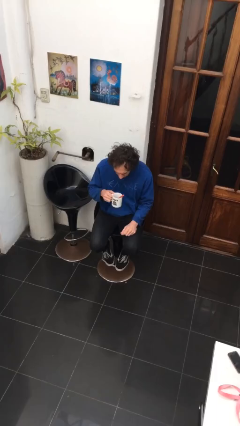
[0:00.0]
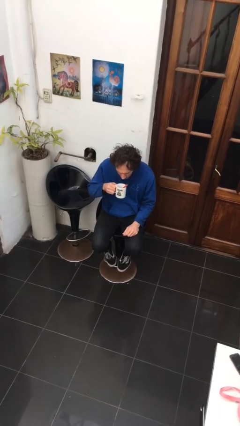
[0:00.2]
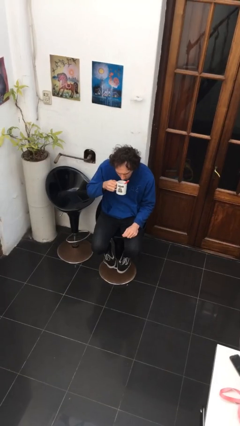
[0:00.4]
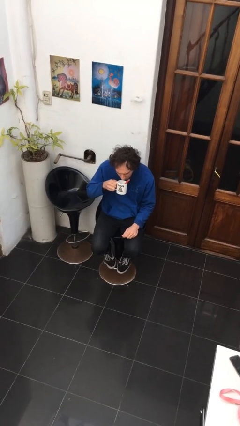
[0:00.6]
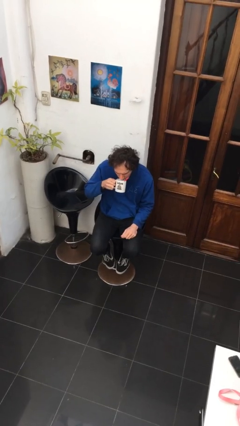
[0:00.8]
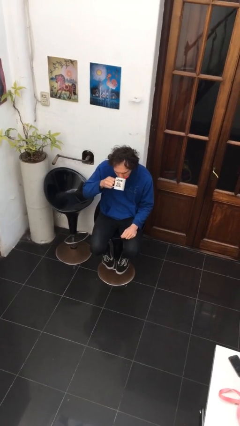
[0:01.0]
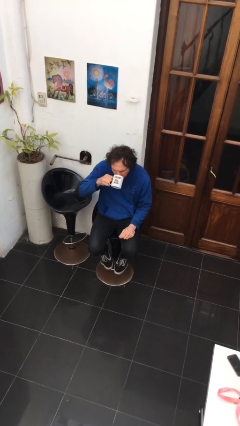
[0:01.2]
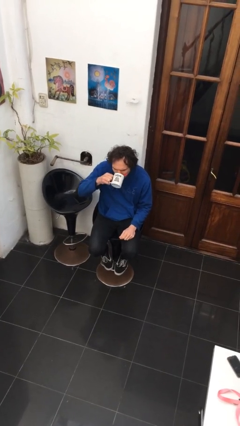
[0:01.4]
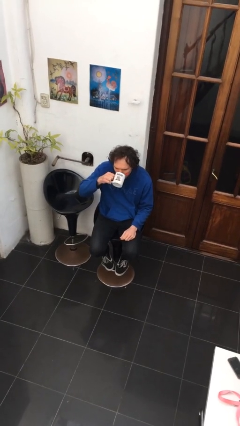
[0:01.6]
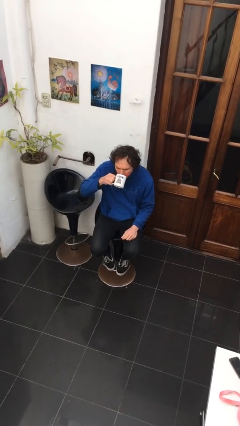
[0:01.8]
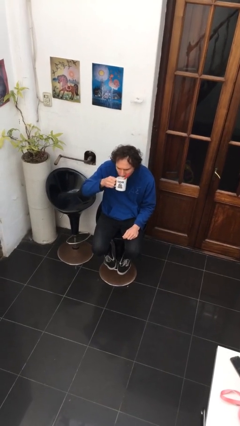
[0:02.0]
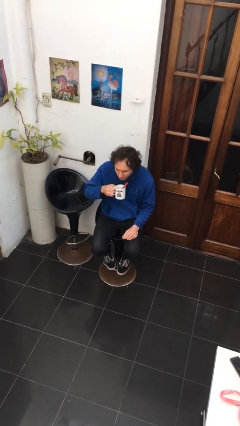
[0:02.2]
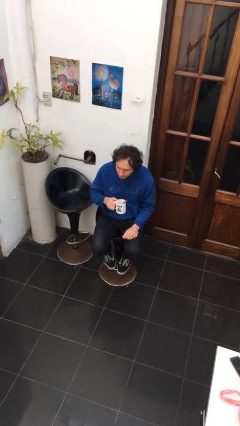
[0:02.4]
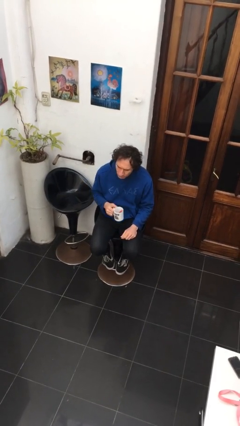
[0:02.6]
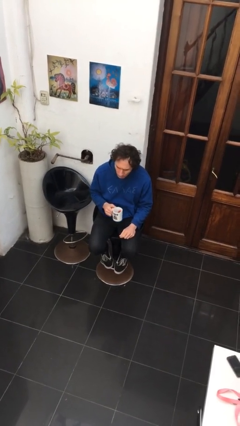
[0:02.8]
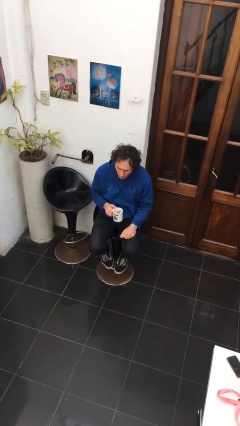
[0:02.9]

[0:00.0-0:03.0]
person drinks from mug

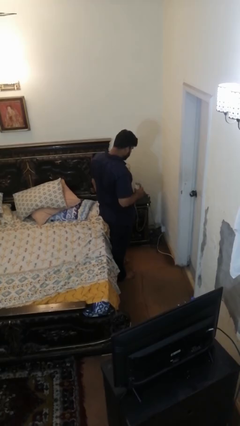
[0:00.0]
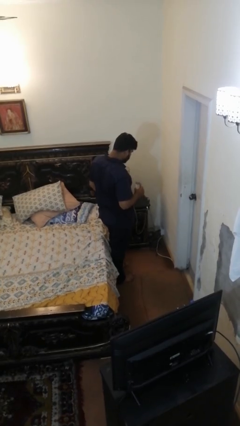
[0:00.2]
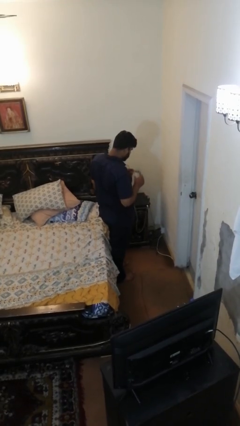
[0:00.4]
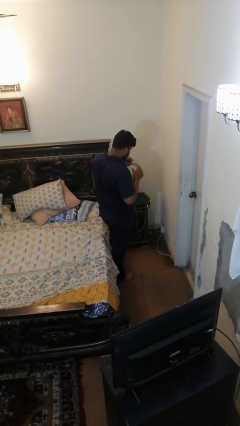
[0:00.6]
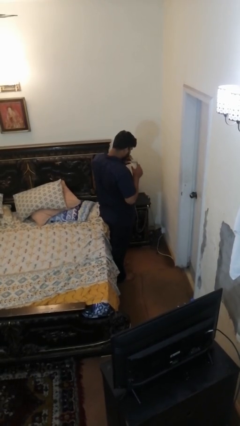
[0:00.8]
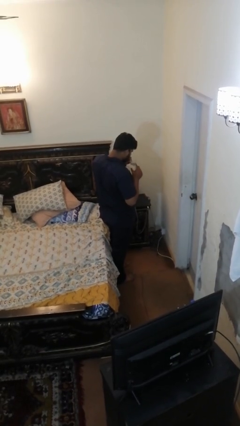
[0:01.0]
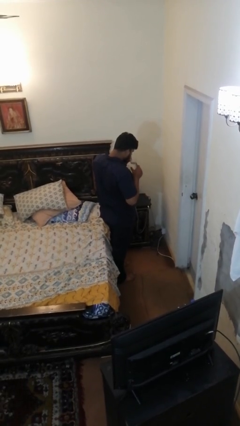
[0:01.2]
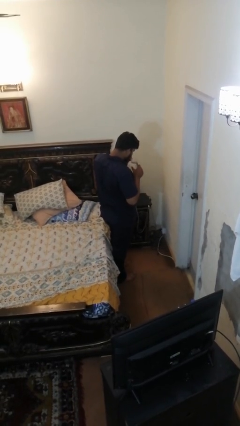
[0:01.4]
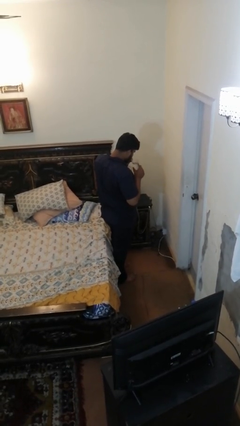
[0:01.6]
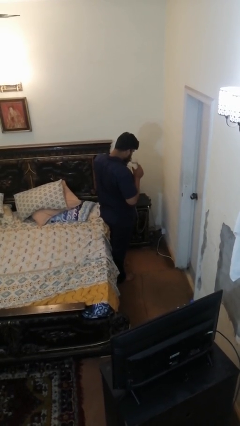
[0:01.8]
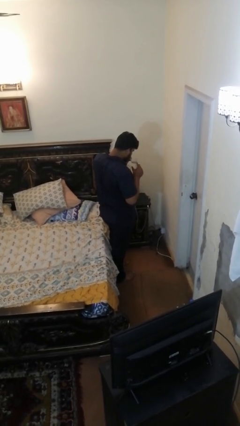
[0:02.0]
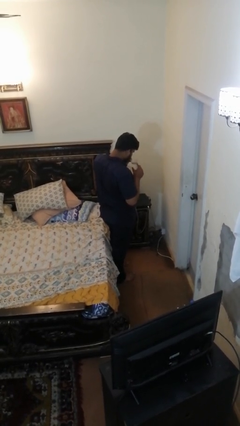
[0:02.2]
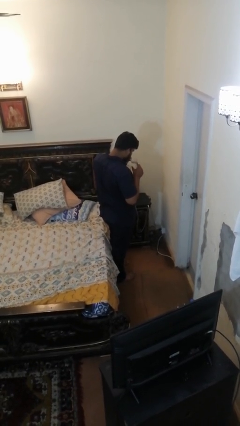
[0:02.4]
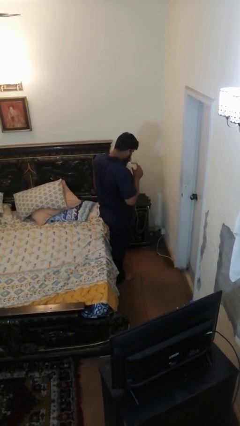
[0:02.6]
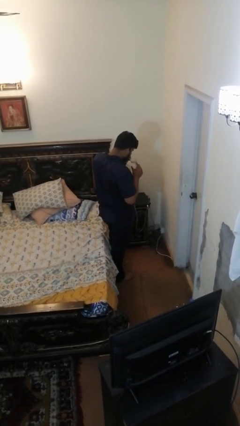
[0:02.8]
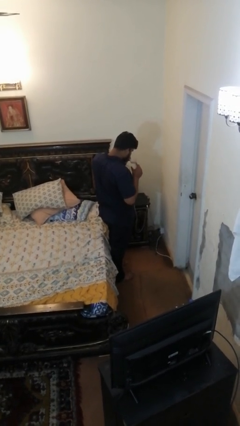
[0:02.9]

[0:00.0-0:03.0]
person drinks from straw

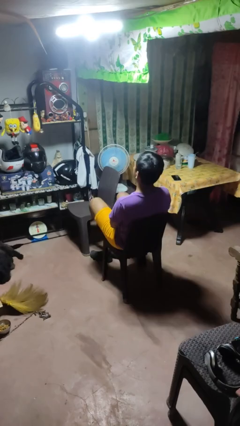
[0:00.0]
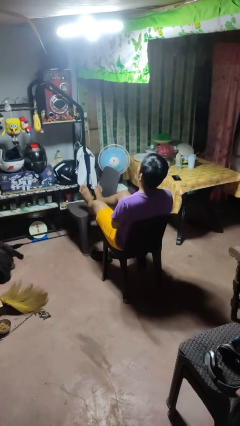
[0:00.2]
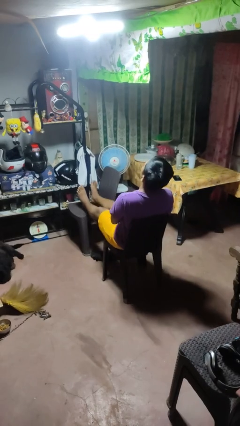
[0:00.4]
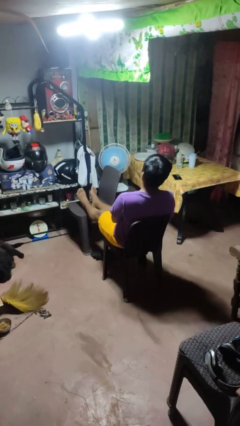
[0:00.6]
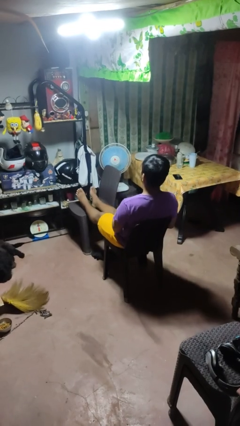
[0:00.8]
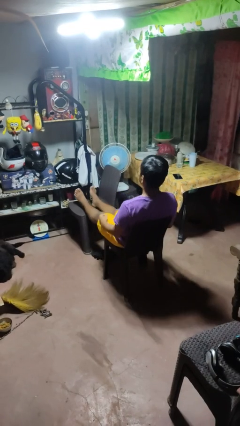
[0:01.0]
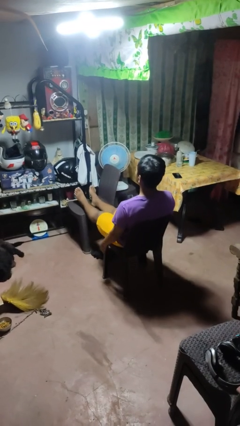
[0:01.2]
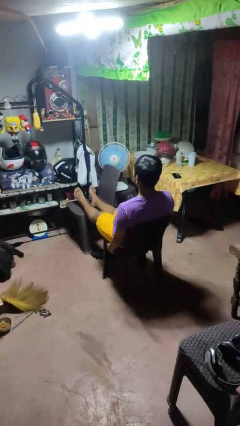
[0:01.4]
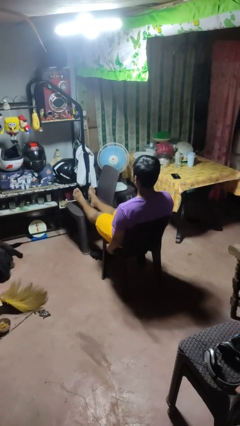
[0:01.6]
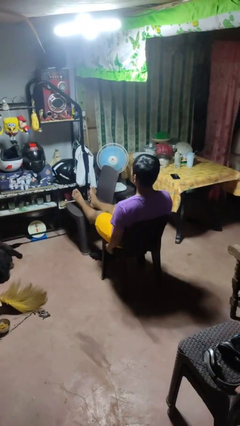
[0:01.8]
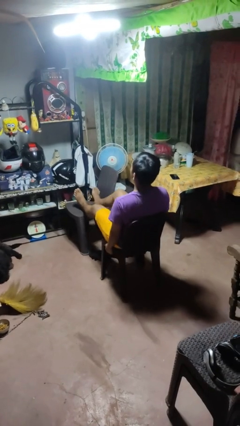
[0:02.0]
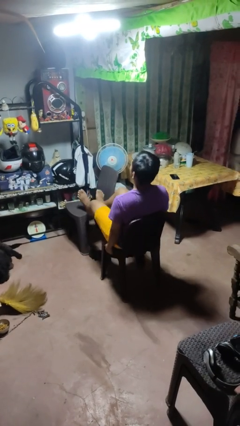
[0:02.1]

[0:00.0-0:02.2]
person puts feet up

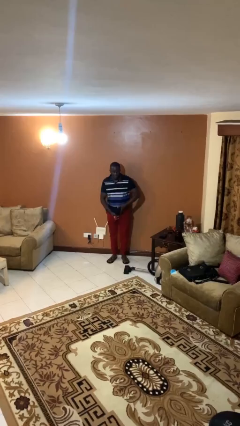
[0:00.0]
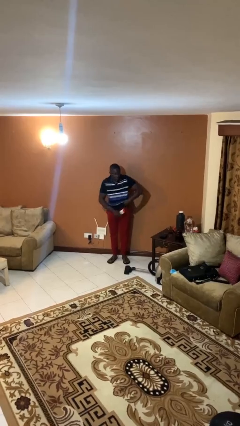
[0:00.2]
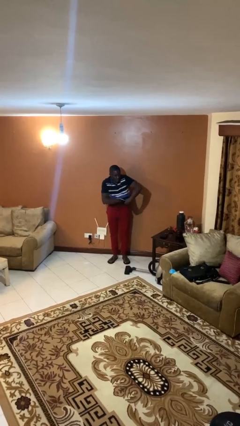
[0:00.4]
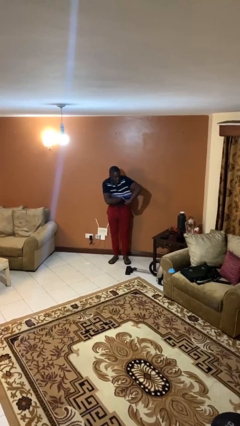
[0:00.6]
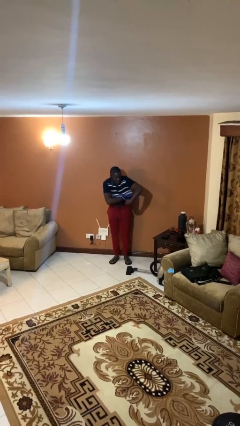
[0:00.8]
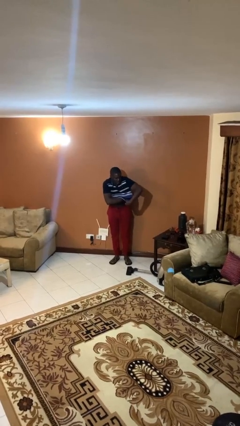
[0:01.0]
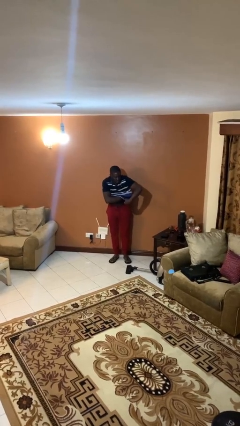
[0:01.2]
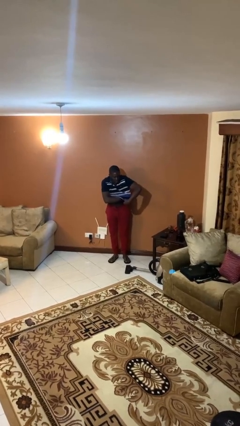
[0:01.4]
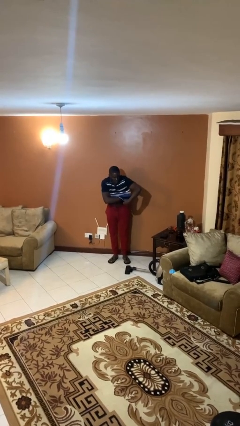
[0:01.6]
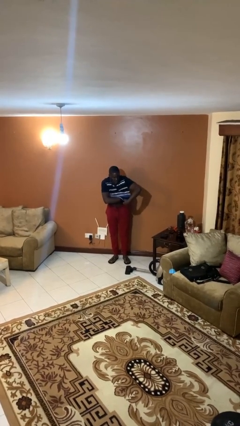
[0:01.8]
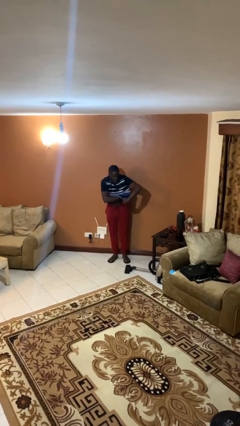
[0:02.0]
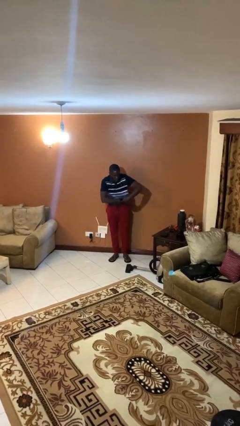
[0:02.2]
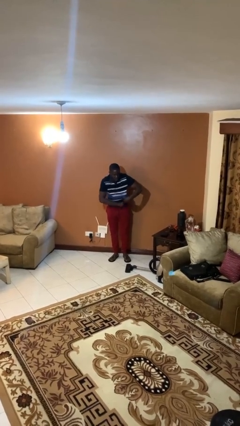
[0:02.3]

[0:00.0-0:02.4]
person applies deodorant

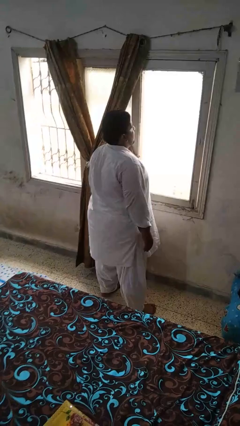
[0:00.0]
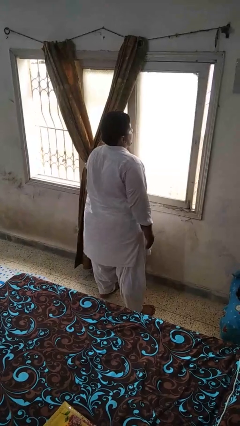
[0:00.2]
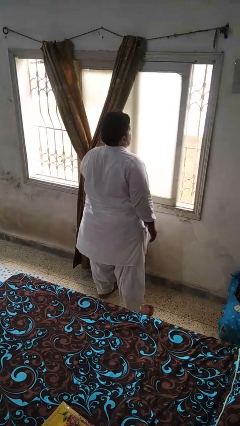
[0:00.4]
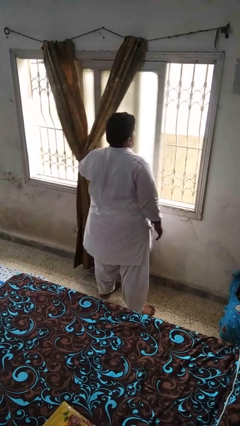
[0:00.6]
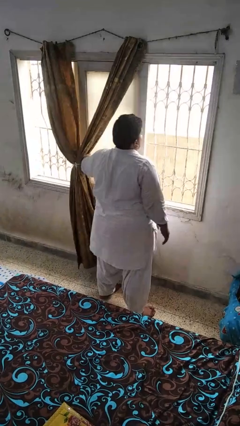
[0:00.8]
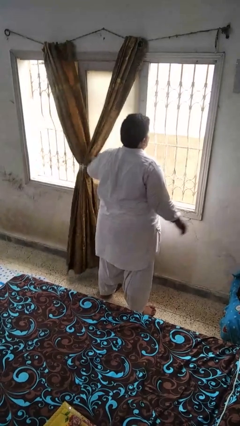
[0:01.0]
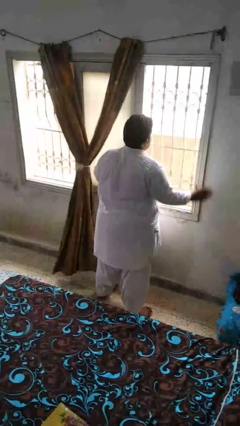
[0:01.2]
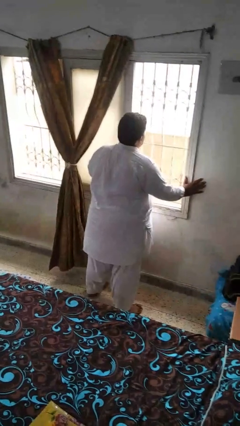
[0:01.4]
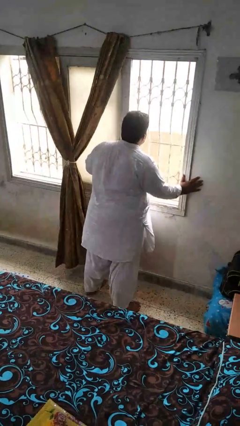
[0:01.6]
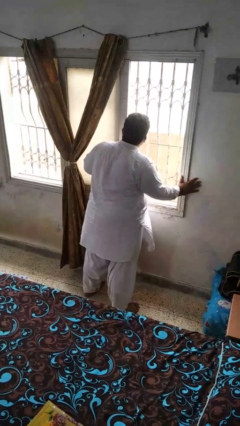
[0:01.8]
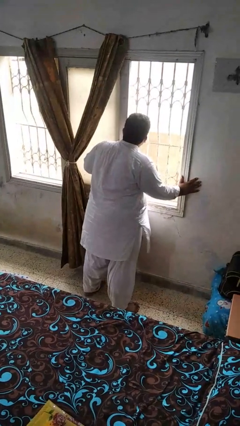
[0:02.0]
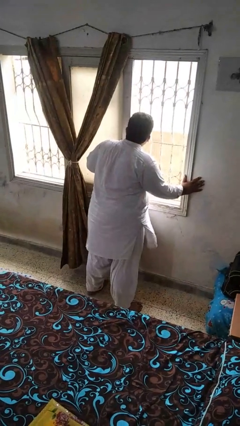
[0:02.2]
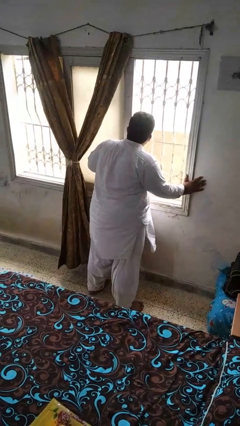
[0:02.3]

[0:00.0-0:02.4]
person opens home window

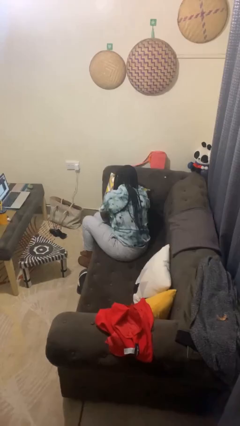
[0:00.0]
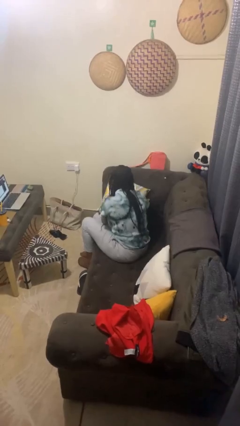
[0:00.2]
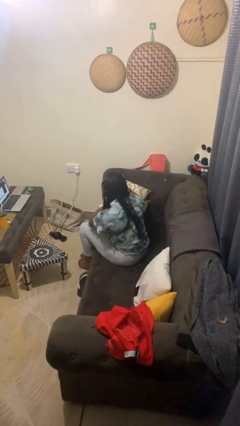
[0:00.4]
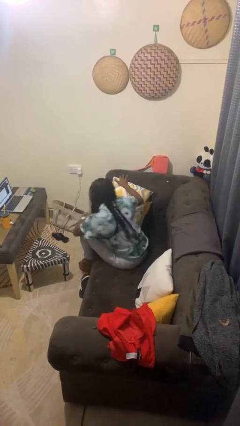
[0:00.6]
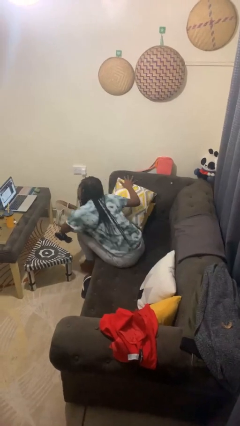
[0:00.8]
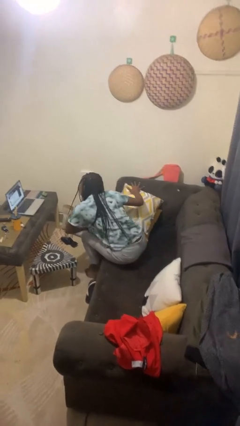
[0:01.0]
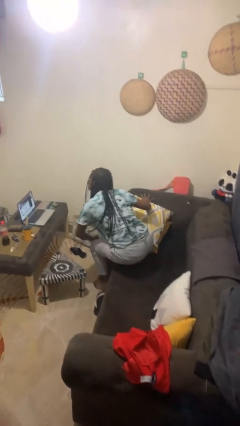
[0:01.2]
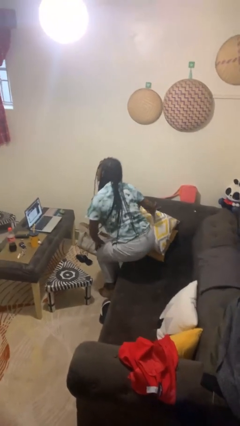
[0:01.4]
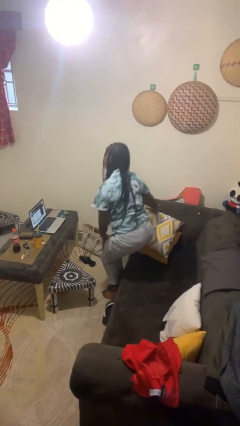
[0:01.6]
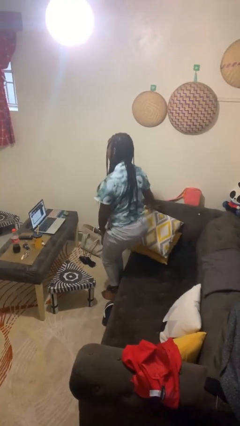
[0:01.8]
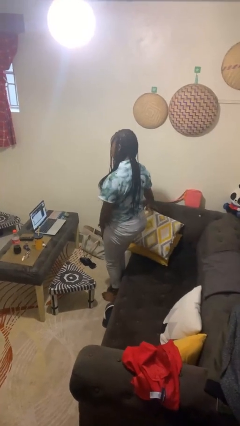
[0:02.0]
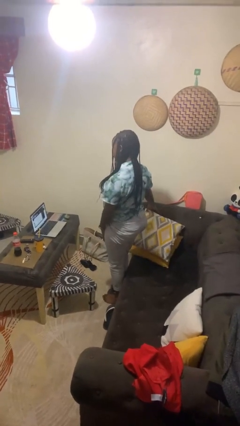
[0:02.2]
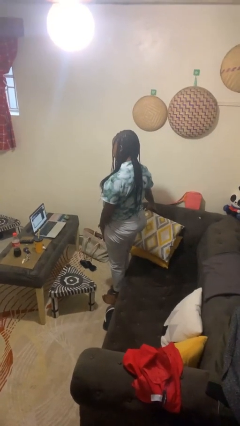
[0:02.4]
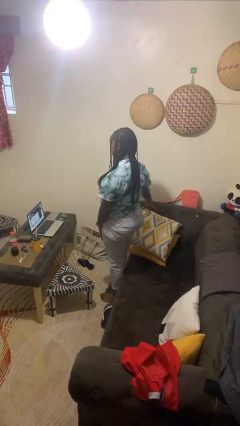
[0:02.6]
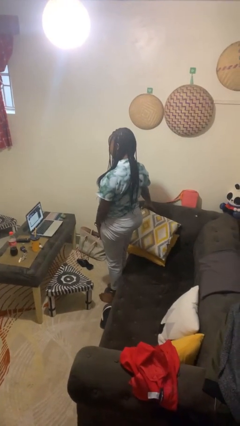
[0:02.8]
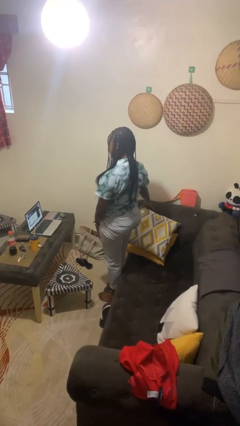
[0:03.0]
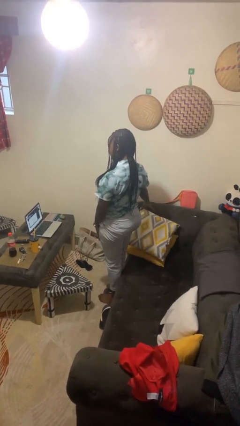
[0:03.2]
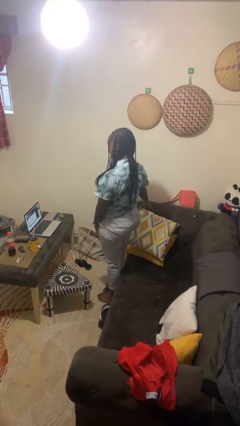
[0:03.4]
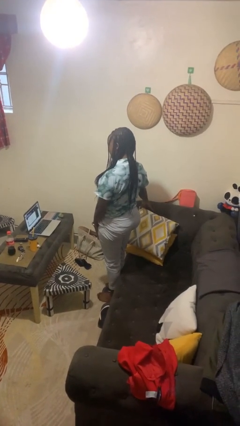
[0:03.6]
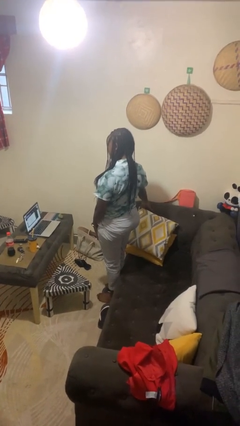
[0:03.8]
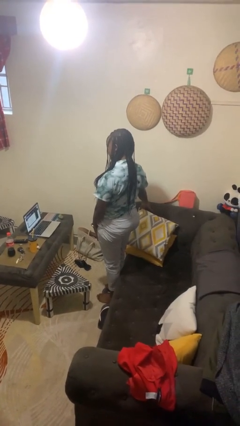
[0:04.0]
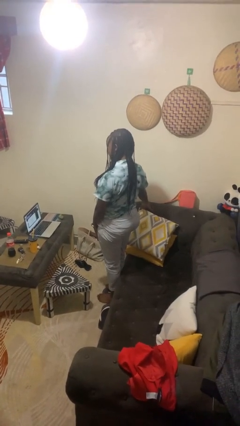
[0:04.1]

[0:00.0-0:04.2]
person stands up
